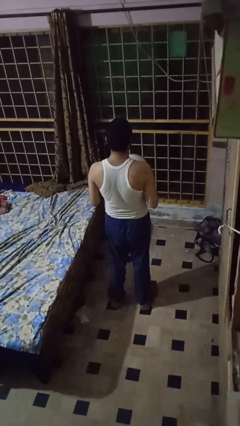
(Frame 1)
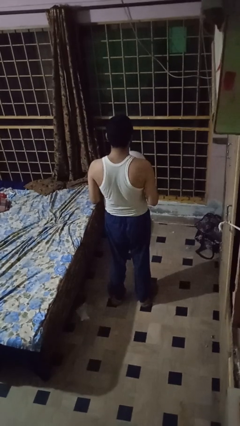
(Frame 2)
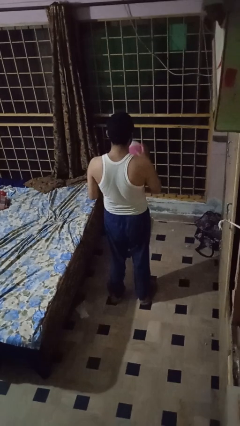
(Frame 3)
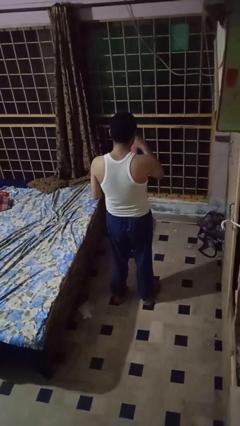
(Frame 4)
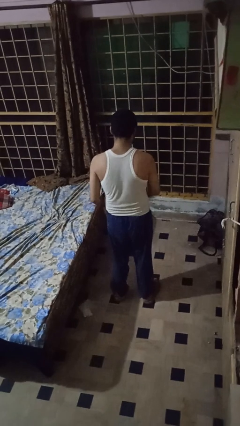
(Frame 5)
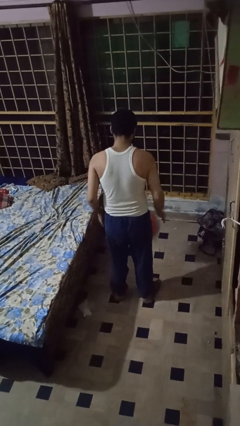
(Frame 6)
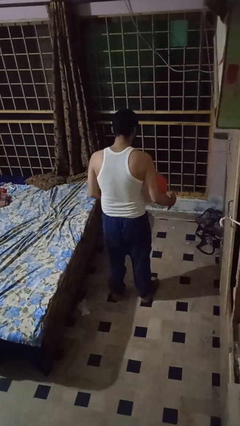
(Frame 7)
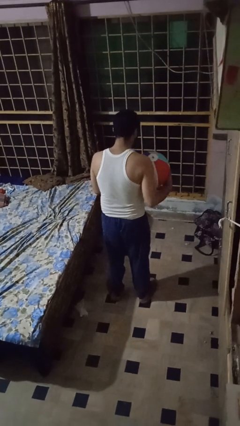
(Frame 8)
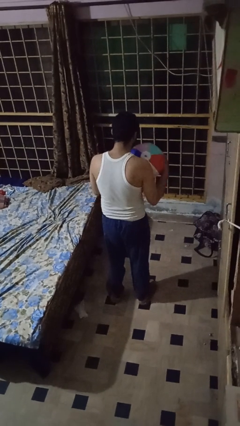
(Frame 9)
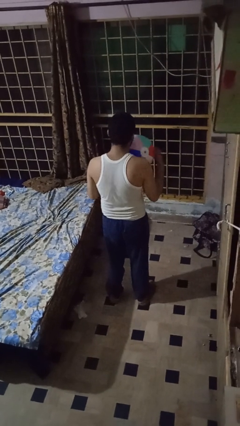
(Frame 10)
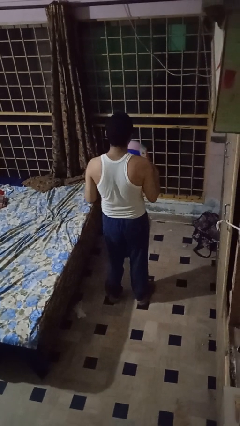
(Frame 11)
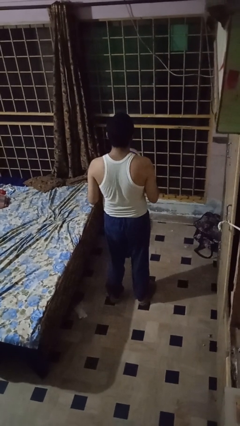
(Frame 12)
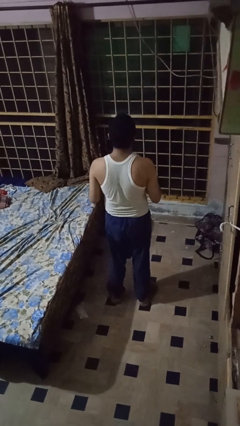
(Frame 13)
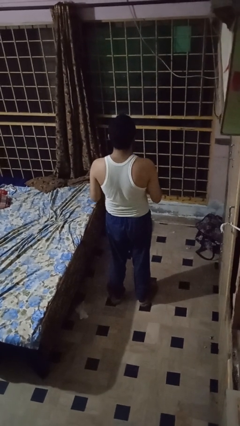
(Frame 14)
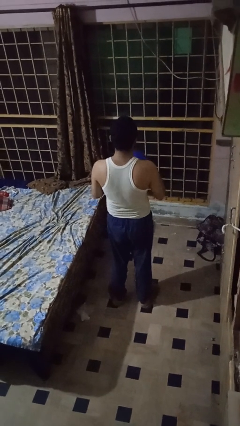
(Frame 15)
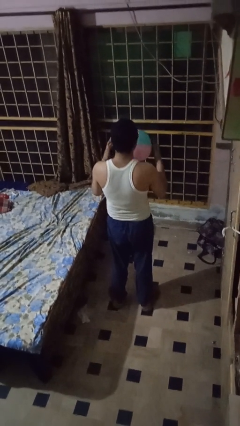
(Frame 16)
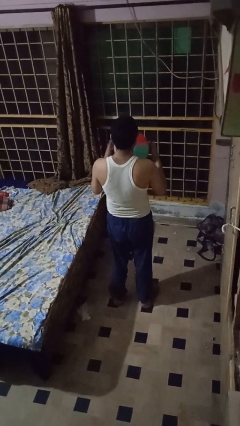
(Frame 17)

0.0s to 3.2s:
person bounces ball on floor

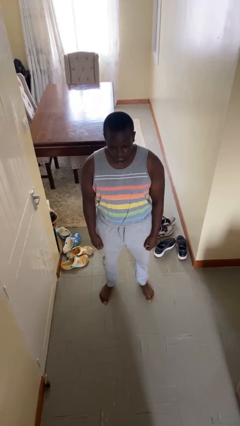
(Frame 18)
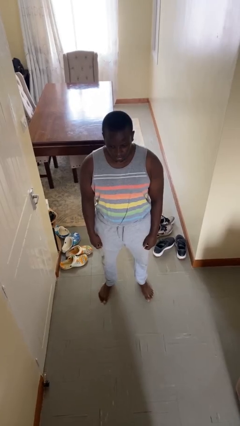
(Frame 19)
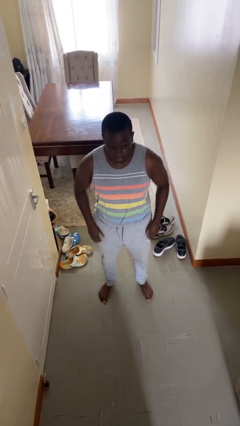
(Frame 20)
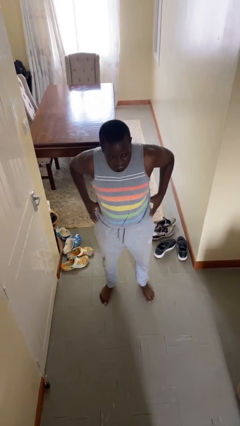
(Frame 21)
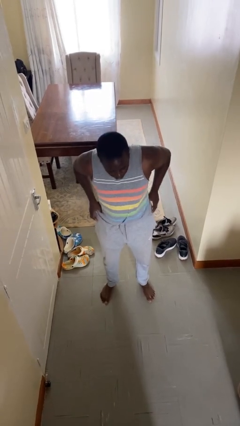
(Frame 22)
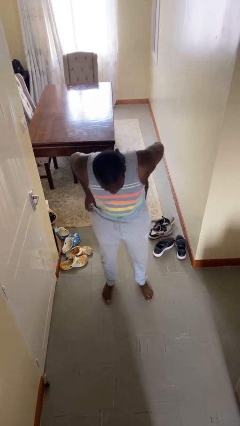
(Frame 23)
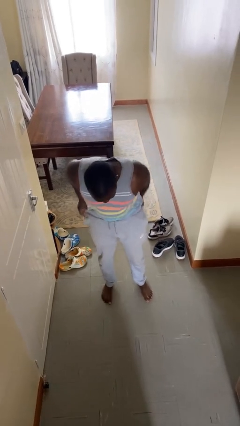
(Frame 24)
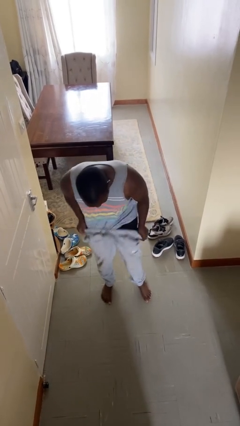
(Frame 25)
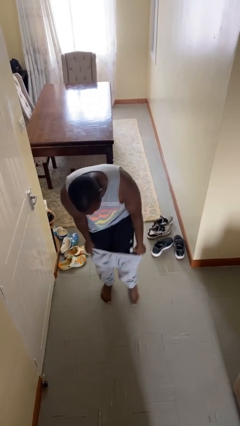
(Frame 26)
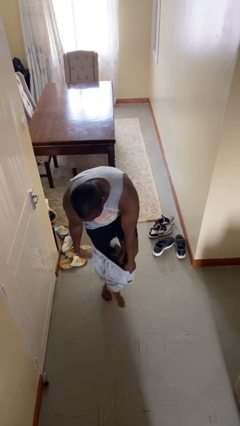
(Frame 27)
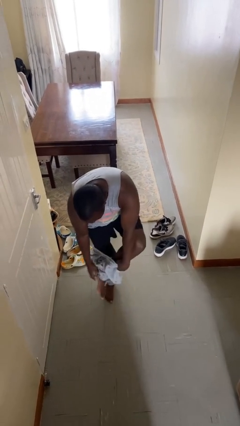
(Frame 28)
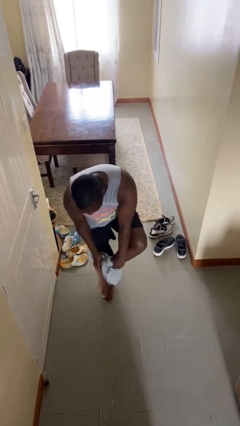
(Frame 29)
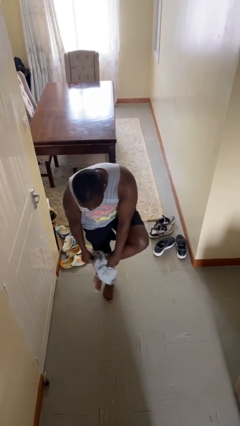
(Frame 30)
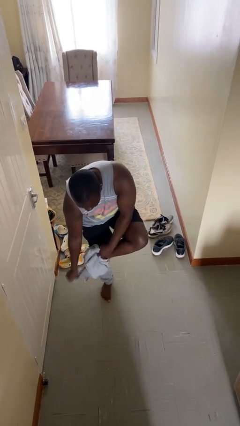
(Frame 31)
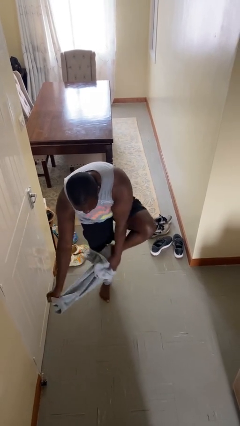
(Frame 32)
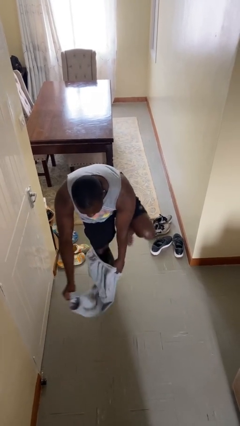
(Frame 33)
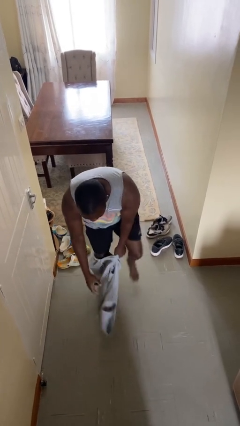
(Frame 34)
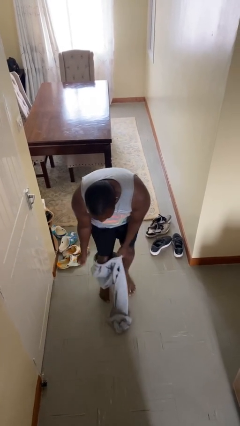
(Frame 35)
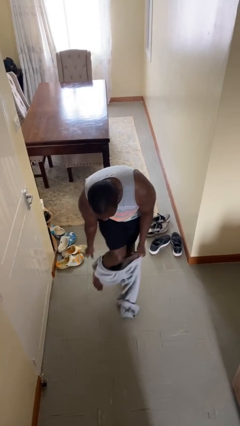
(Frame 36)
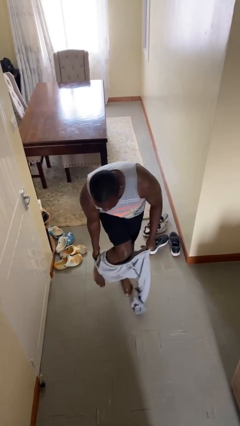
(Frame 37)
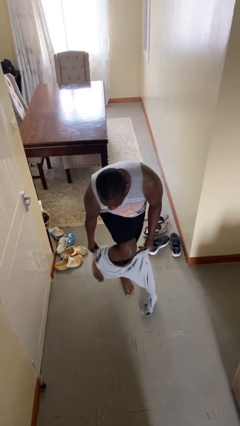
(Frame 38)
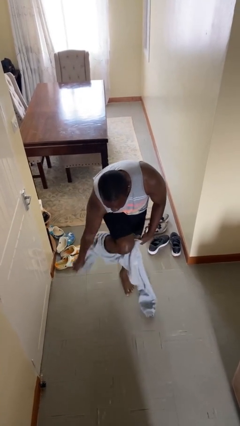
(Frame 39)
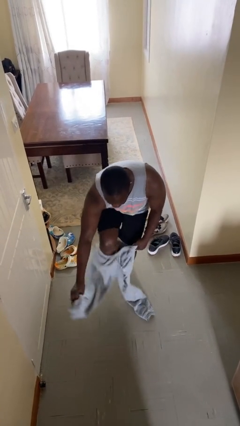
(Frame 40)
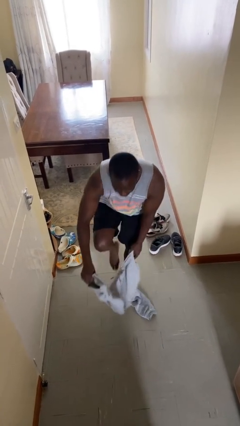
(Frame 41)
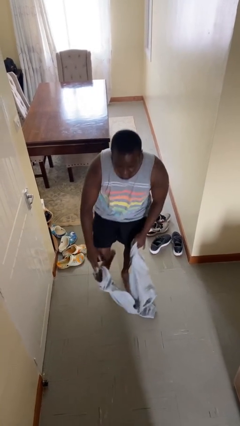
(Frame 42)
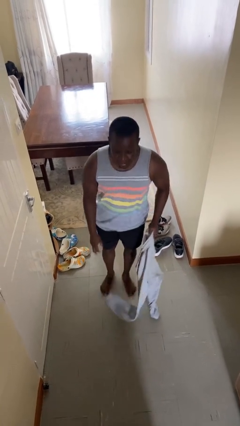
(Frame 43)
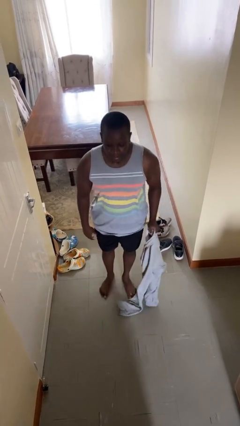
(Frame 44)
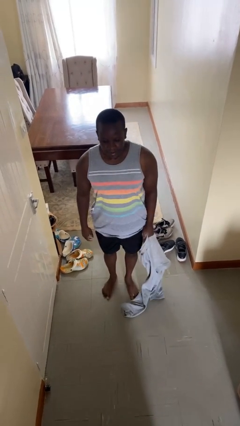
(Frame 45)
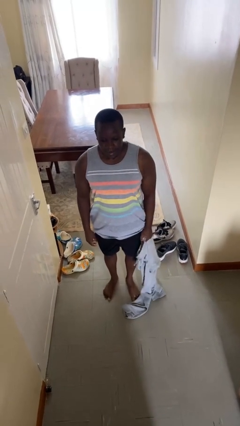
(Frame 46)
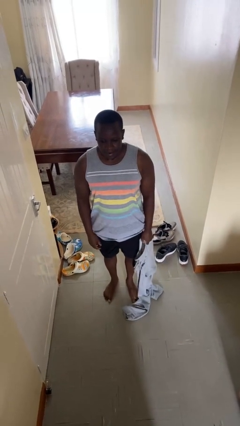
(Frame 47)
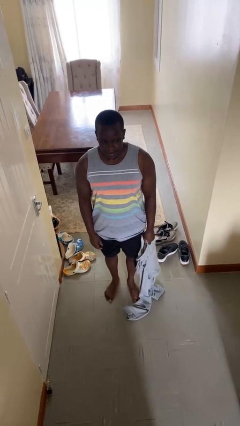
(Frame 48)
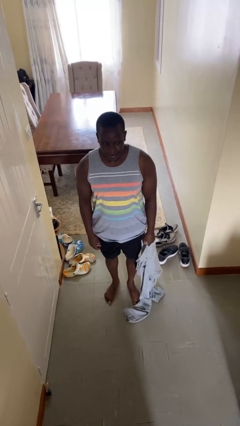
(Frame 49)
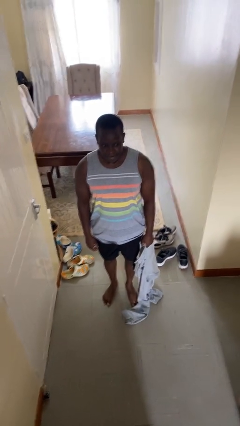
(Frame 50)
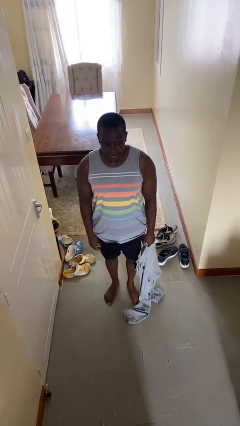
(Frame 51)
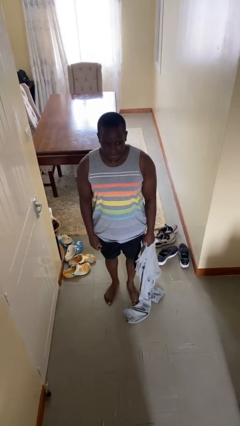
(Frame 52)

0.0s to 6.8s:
person takes off pants

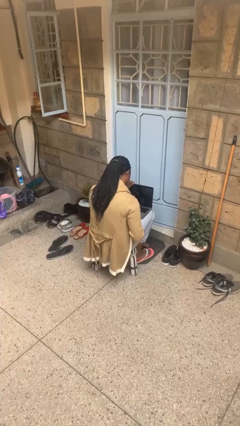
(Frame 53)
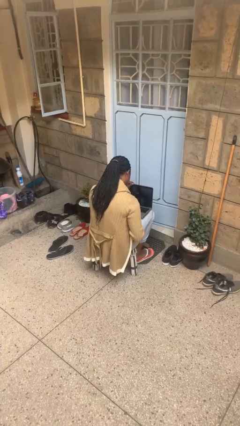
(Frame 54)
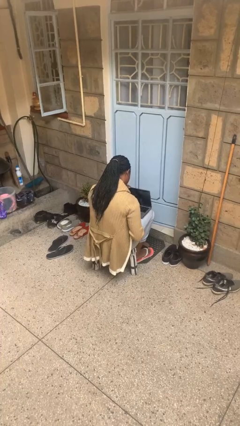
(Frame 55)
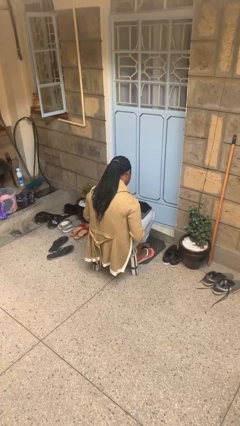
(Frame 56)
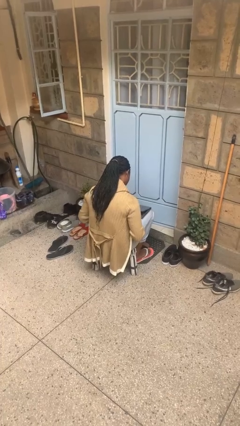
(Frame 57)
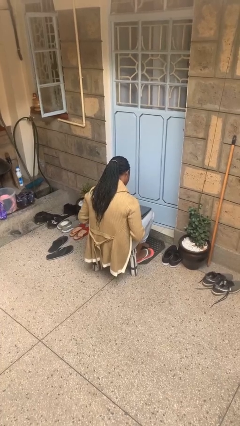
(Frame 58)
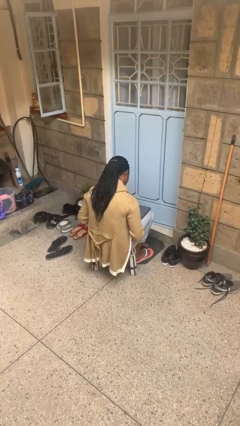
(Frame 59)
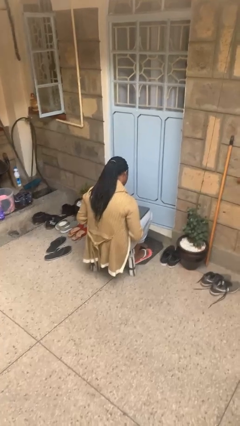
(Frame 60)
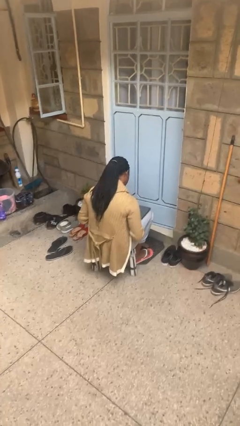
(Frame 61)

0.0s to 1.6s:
person closes laptop

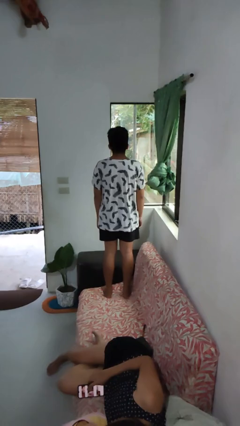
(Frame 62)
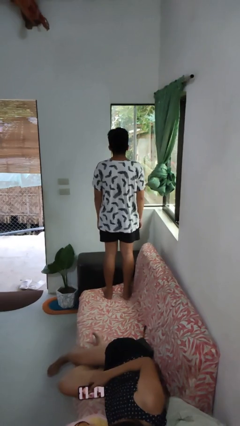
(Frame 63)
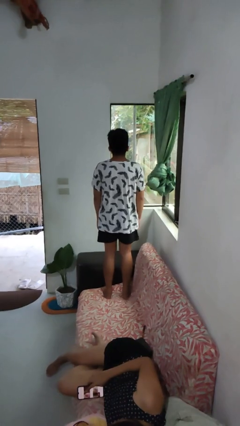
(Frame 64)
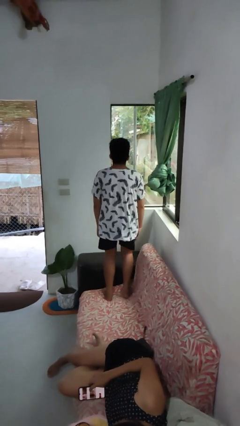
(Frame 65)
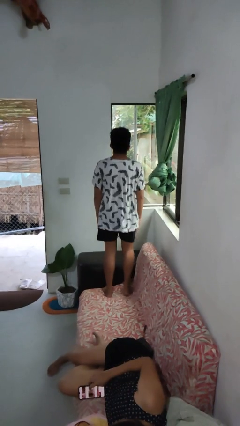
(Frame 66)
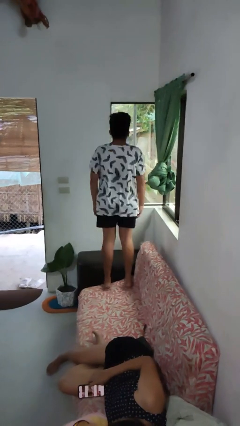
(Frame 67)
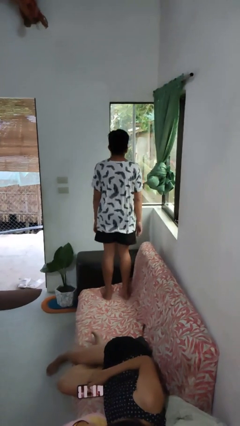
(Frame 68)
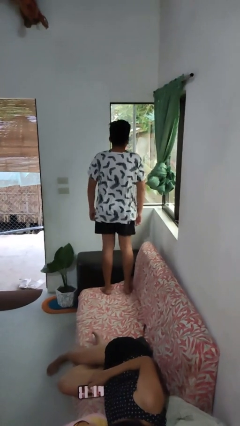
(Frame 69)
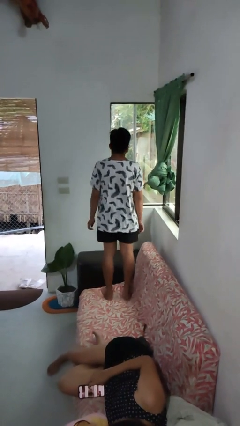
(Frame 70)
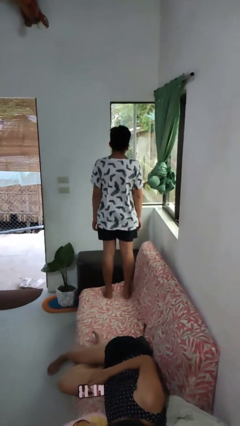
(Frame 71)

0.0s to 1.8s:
person jumps on couch

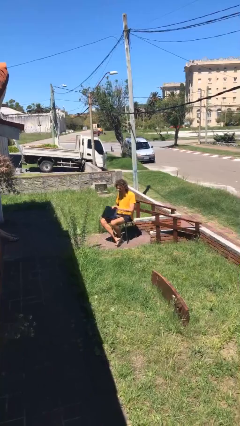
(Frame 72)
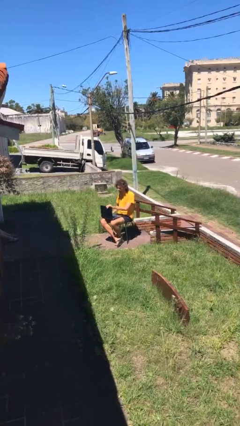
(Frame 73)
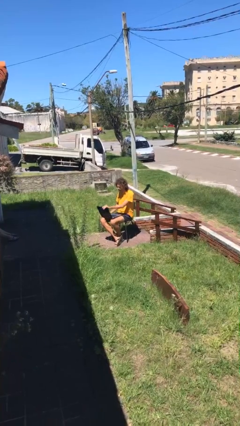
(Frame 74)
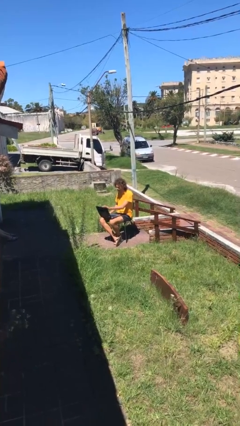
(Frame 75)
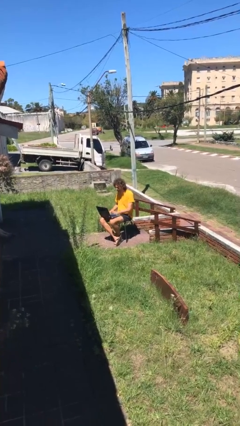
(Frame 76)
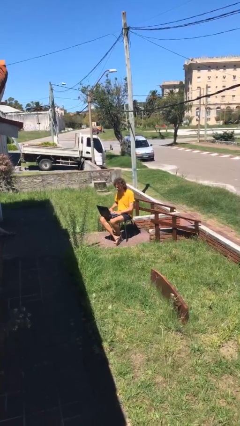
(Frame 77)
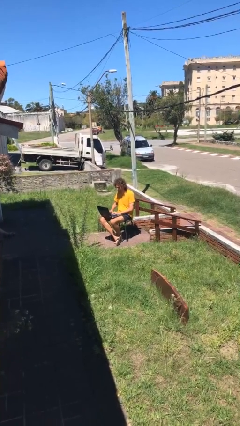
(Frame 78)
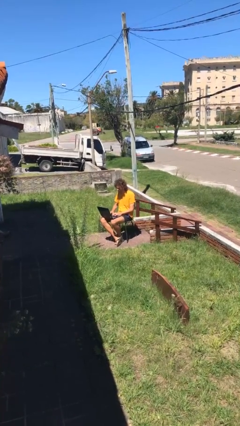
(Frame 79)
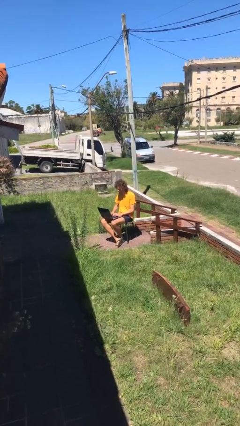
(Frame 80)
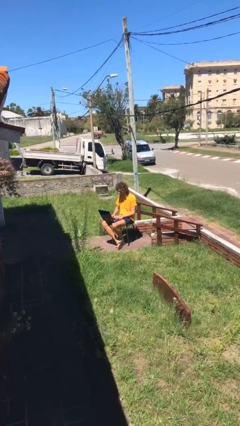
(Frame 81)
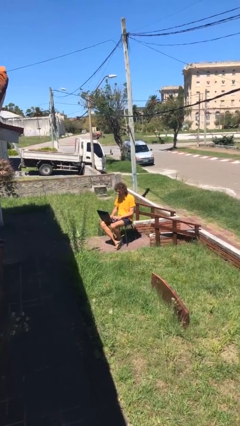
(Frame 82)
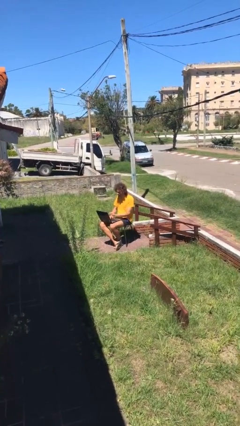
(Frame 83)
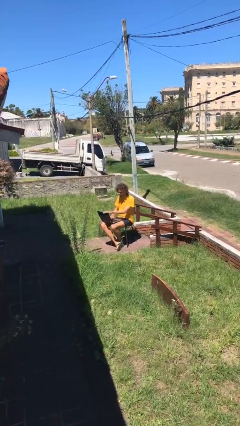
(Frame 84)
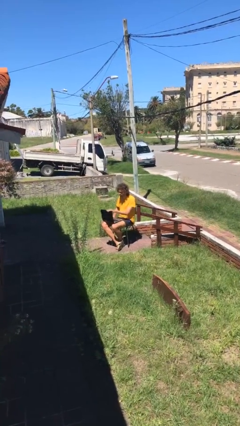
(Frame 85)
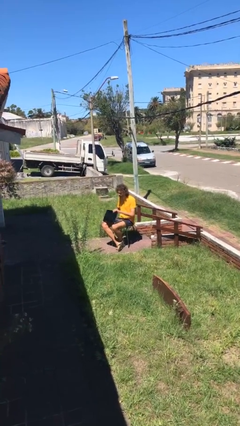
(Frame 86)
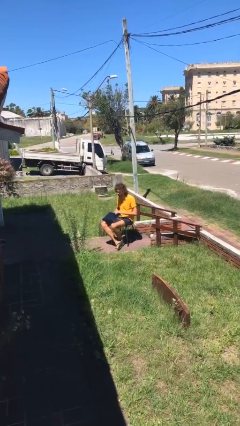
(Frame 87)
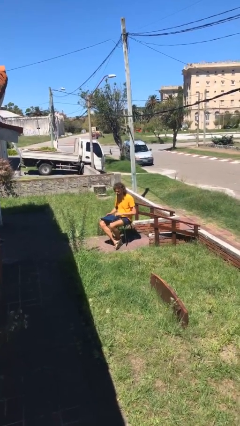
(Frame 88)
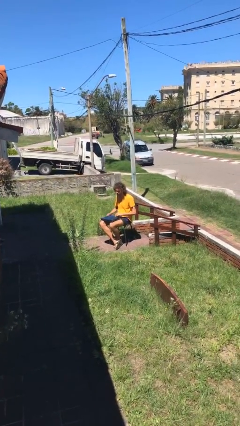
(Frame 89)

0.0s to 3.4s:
person interacts with laptop

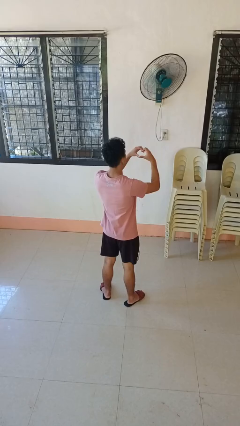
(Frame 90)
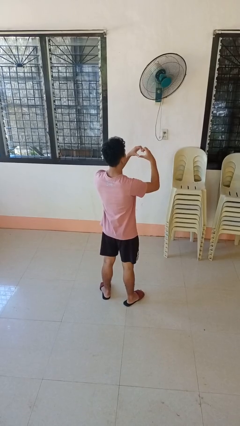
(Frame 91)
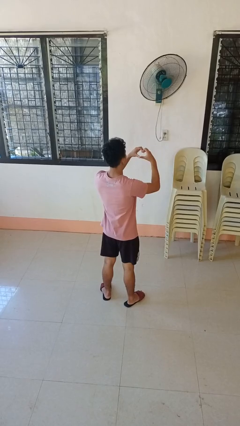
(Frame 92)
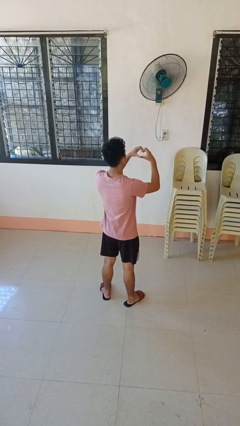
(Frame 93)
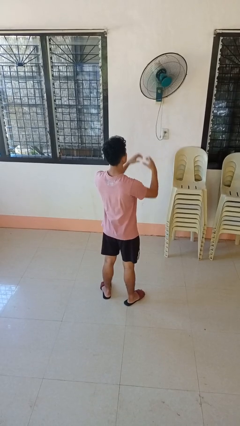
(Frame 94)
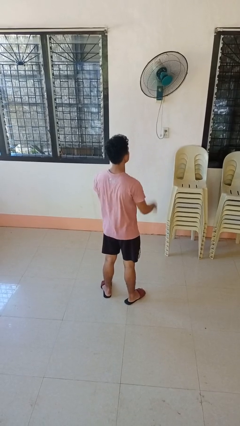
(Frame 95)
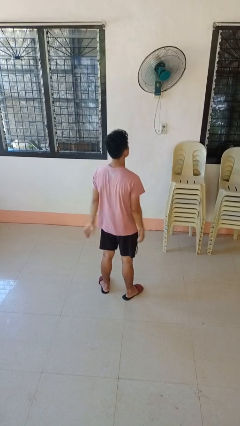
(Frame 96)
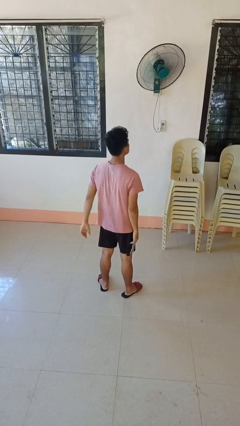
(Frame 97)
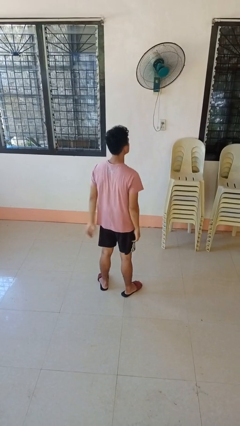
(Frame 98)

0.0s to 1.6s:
person gestures heart
